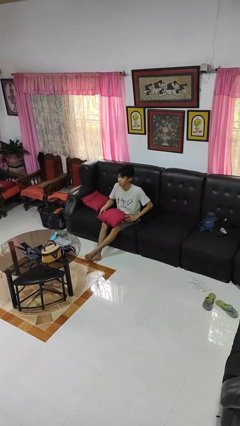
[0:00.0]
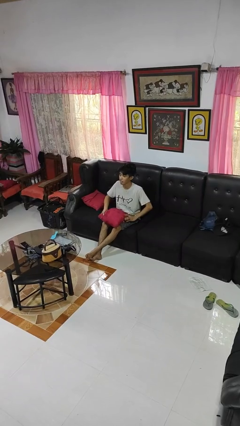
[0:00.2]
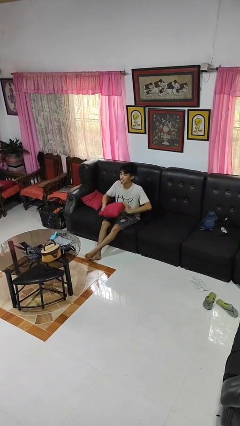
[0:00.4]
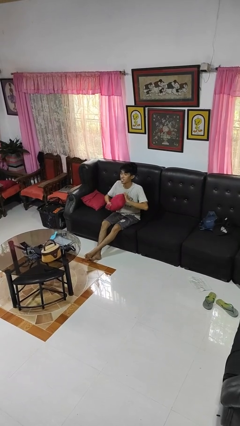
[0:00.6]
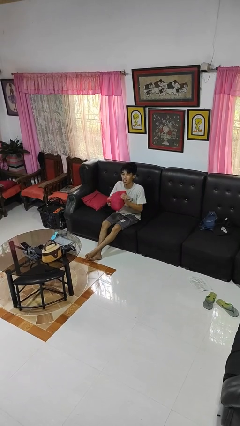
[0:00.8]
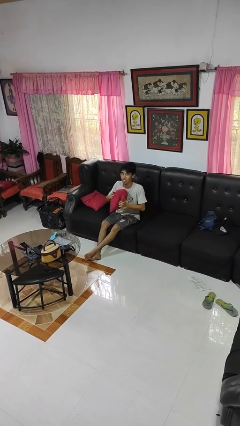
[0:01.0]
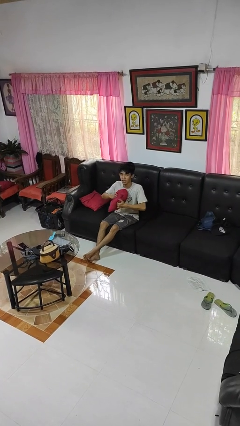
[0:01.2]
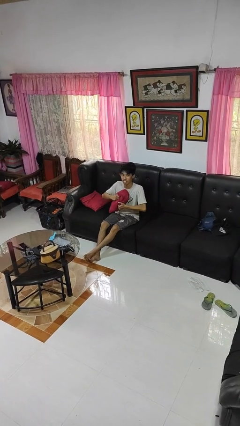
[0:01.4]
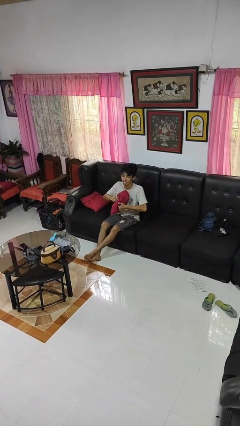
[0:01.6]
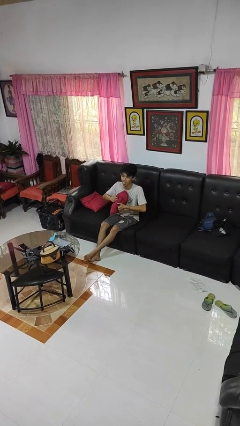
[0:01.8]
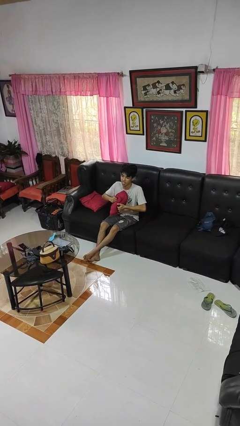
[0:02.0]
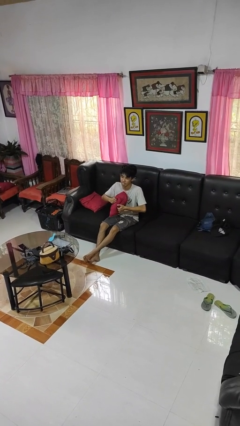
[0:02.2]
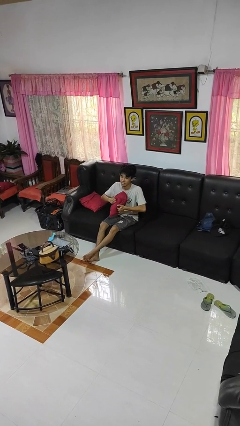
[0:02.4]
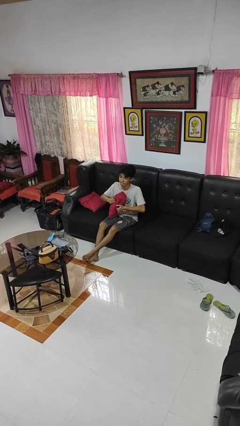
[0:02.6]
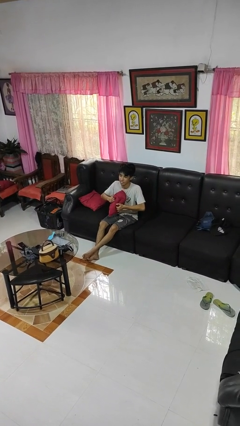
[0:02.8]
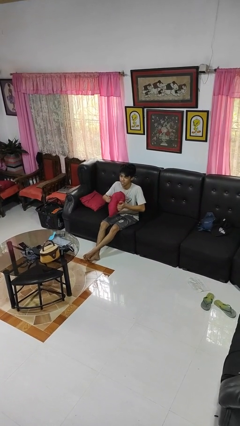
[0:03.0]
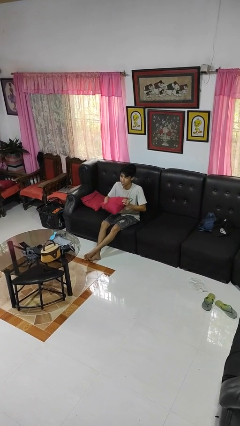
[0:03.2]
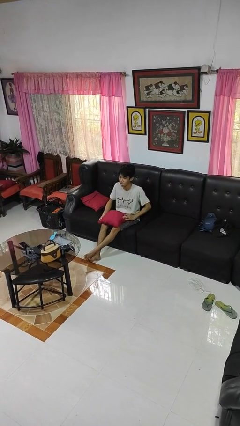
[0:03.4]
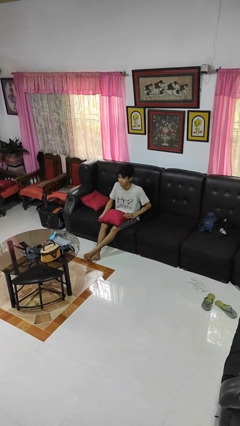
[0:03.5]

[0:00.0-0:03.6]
person squeezes object

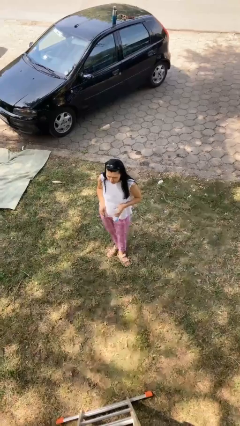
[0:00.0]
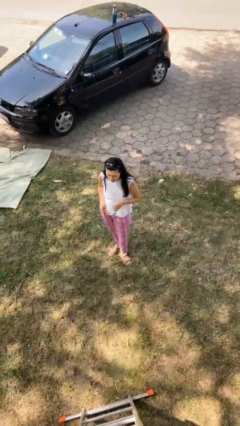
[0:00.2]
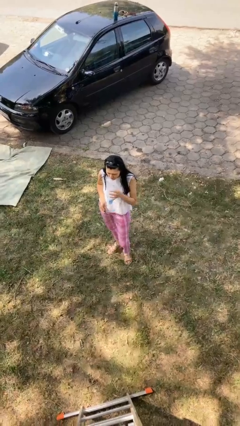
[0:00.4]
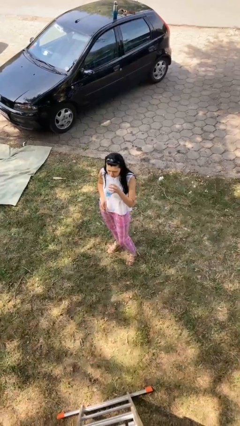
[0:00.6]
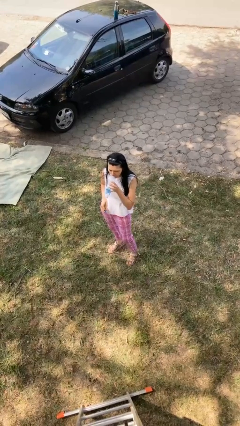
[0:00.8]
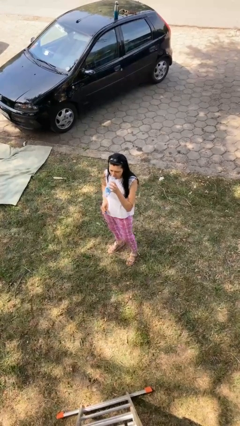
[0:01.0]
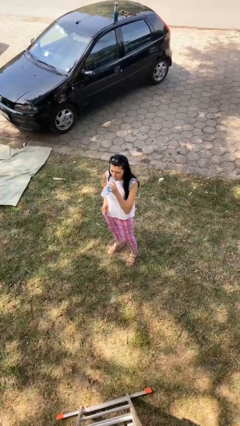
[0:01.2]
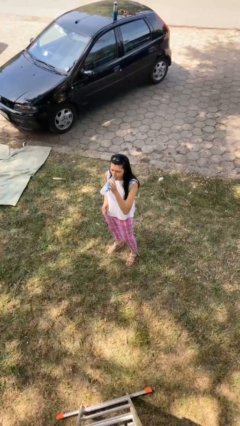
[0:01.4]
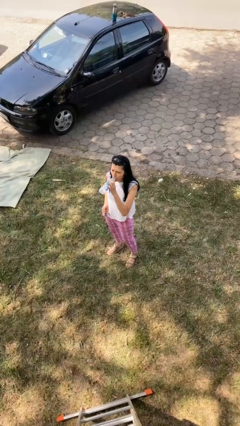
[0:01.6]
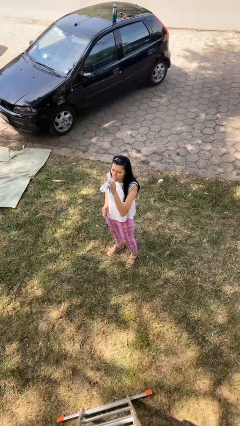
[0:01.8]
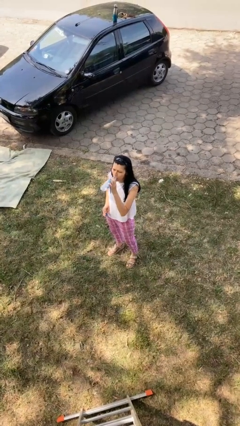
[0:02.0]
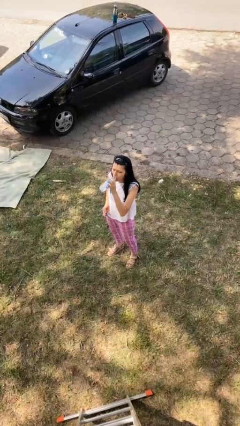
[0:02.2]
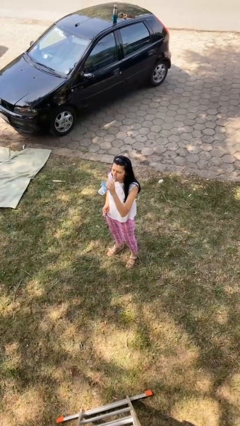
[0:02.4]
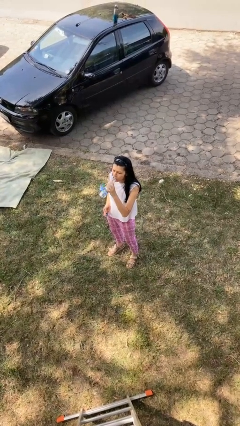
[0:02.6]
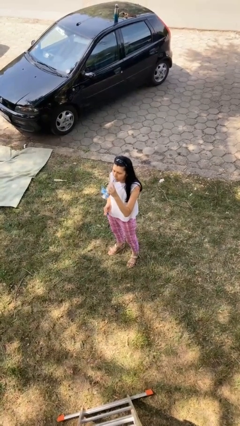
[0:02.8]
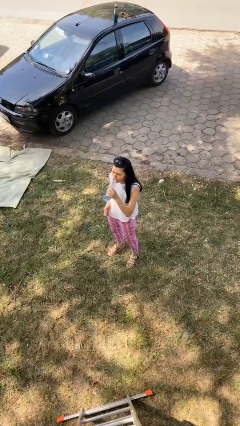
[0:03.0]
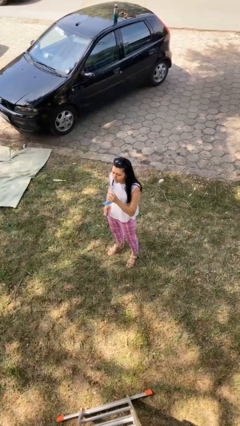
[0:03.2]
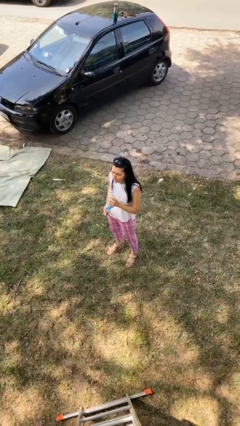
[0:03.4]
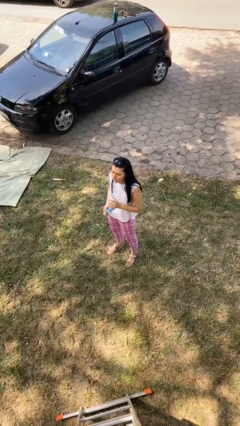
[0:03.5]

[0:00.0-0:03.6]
person drinks from bottle

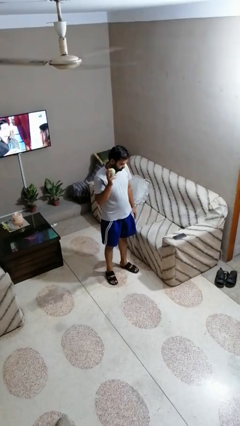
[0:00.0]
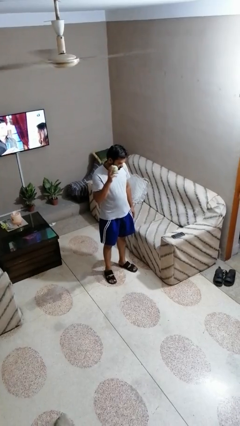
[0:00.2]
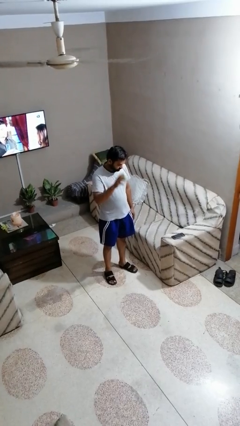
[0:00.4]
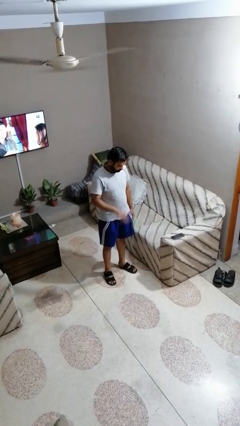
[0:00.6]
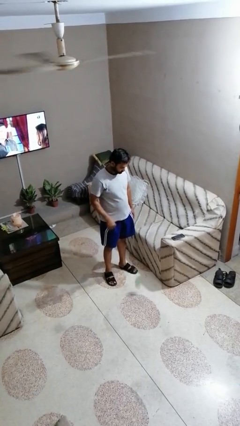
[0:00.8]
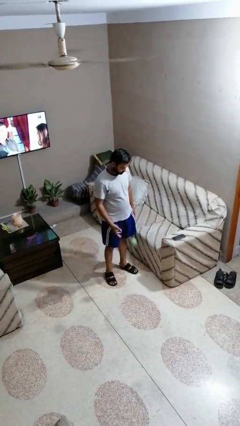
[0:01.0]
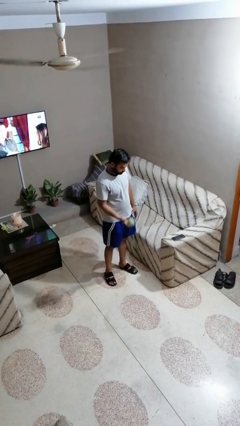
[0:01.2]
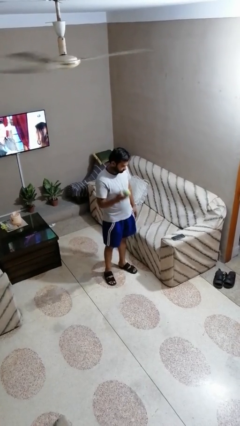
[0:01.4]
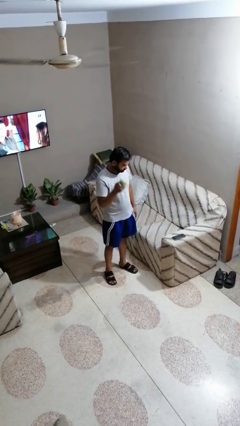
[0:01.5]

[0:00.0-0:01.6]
person bounces ball on floor

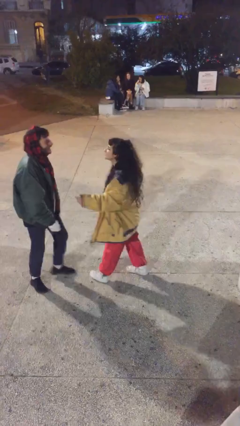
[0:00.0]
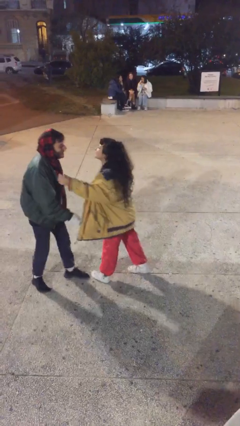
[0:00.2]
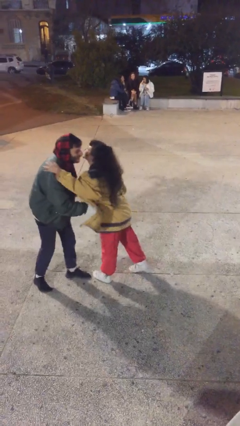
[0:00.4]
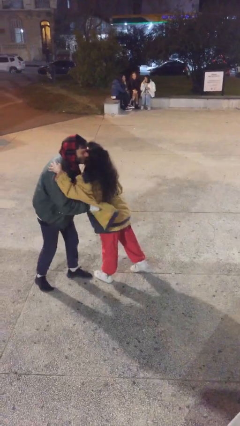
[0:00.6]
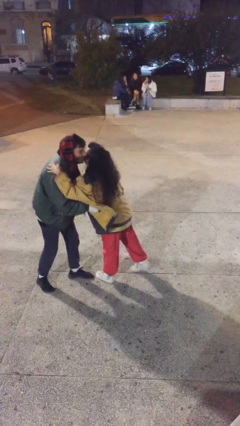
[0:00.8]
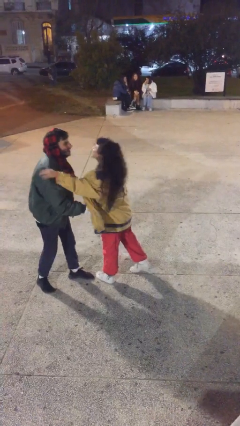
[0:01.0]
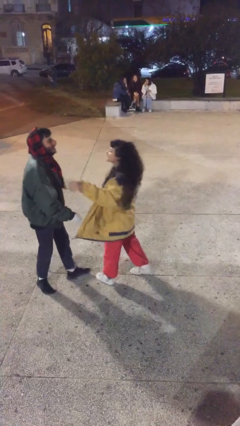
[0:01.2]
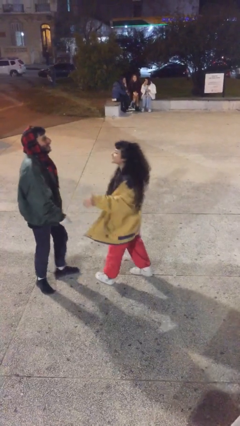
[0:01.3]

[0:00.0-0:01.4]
person kisses cheek of person

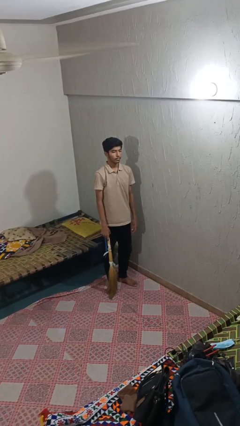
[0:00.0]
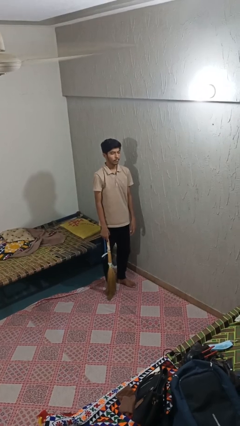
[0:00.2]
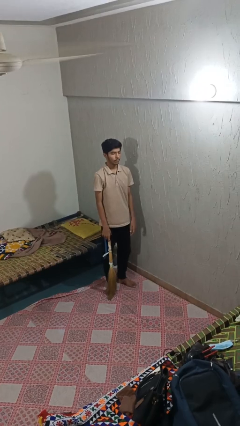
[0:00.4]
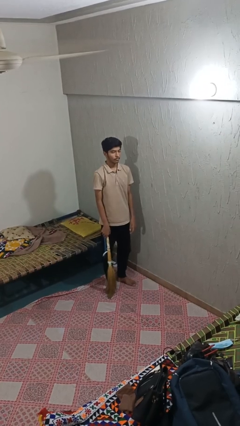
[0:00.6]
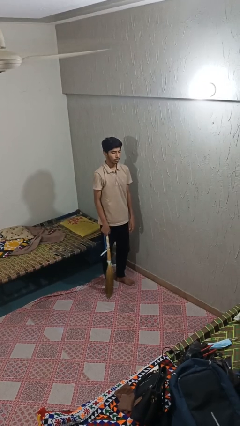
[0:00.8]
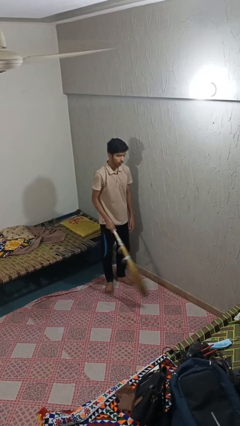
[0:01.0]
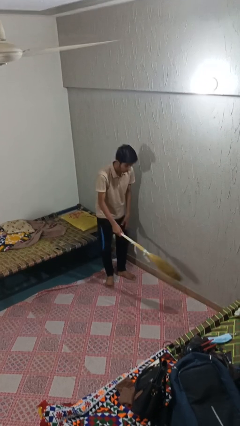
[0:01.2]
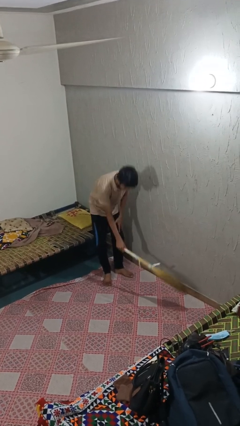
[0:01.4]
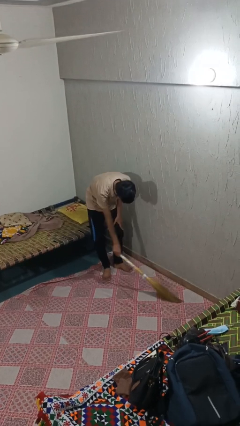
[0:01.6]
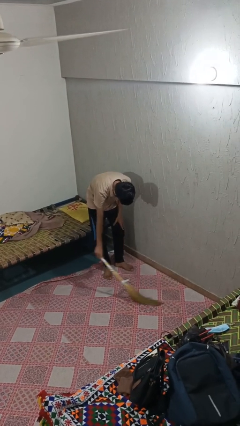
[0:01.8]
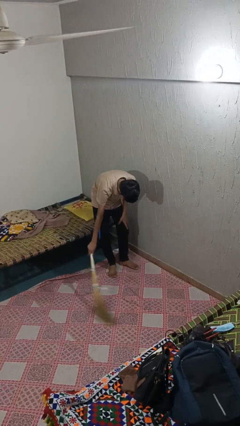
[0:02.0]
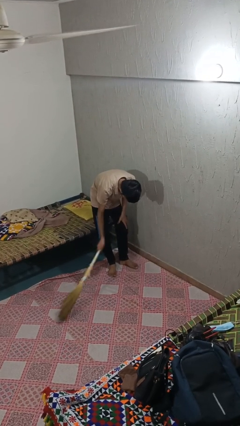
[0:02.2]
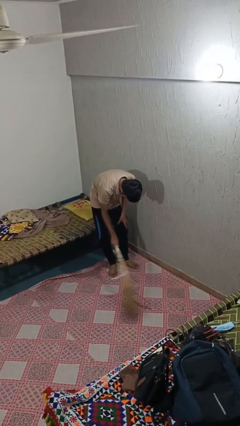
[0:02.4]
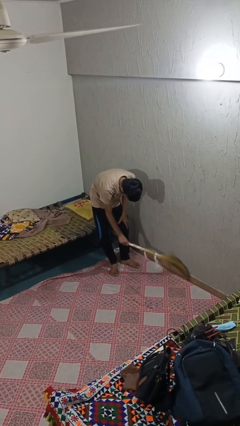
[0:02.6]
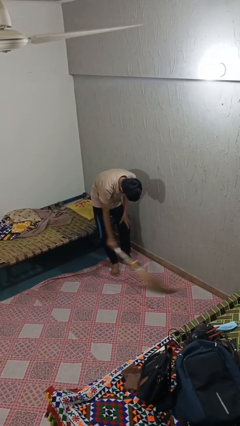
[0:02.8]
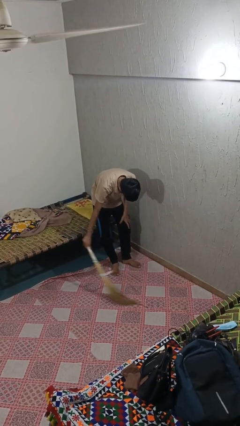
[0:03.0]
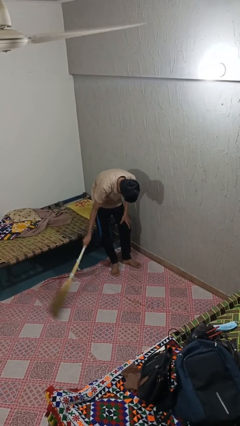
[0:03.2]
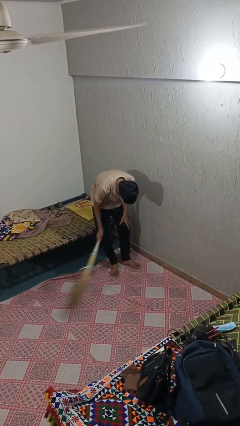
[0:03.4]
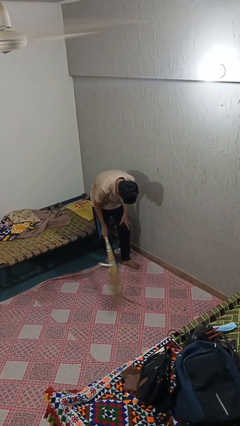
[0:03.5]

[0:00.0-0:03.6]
person sweeps floor

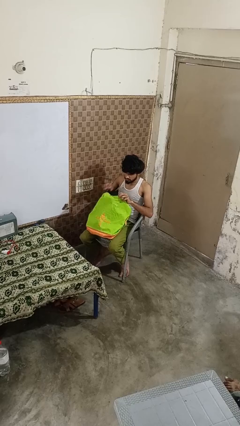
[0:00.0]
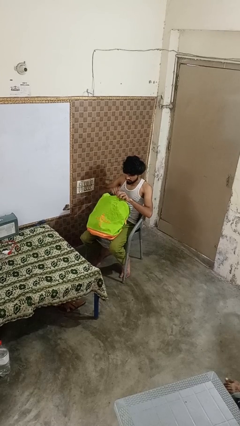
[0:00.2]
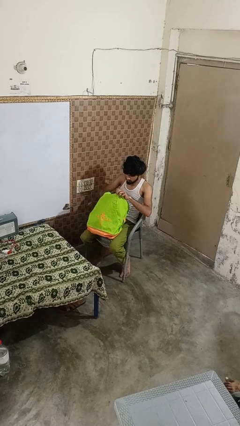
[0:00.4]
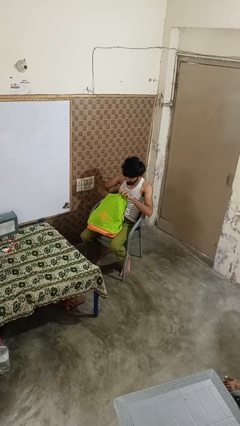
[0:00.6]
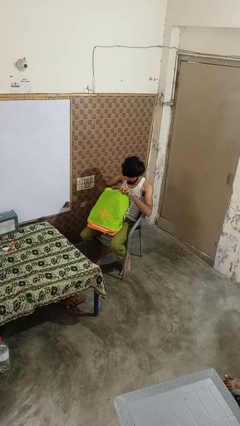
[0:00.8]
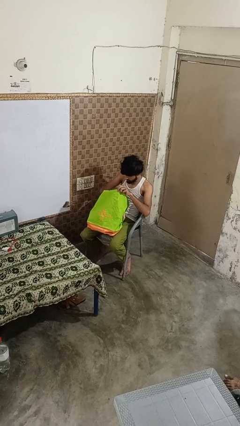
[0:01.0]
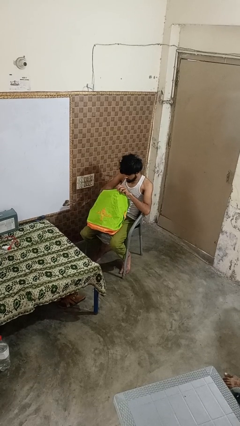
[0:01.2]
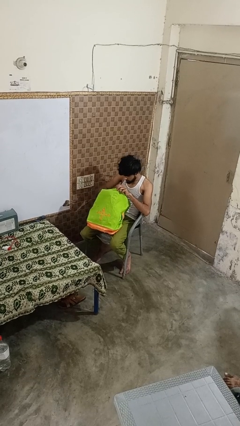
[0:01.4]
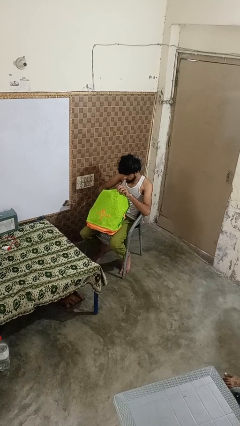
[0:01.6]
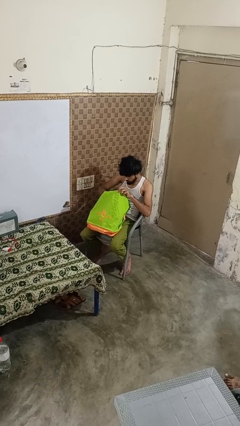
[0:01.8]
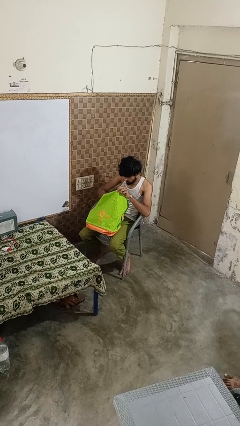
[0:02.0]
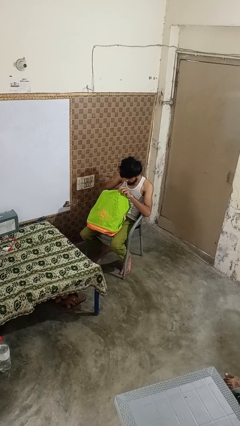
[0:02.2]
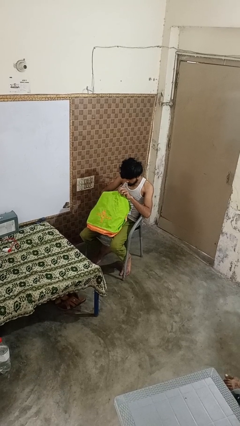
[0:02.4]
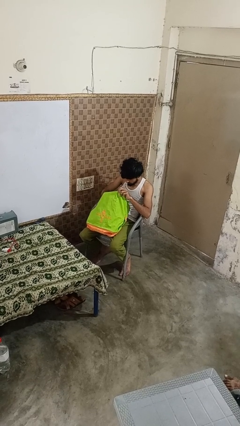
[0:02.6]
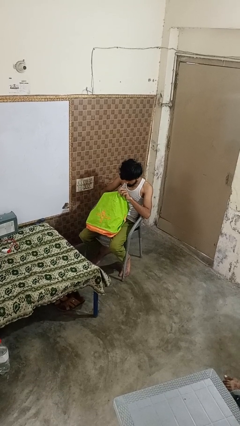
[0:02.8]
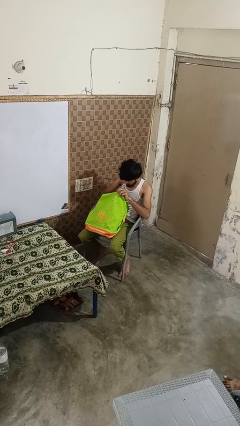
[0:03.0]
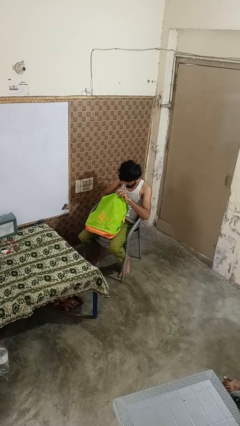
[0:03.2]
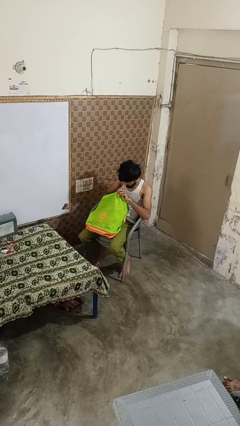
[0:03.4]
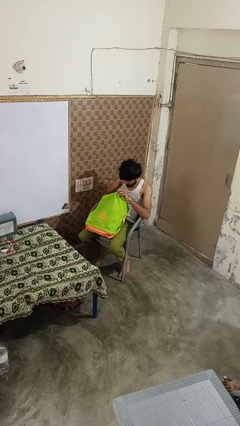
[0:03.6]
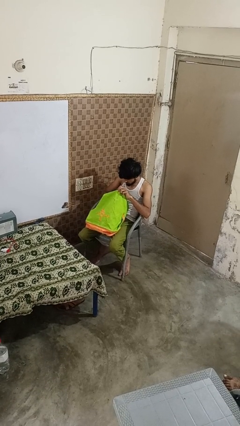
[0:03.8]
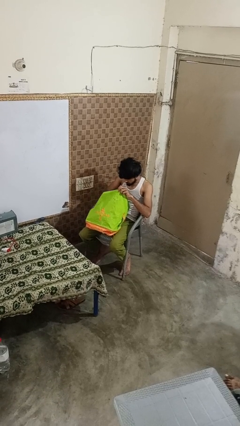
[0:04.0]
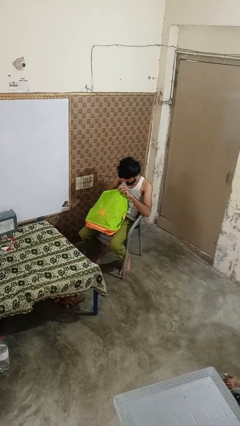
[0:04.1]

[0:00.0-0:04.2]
person searches in bag

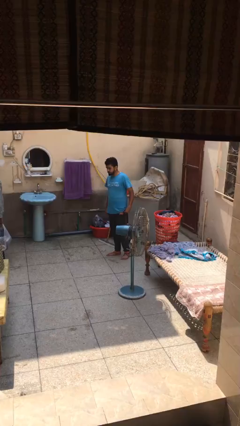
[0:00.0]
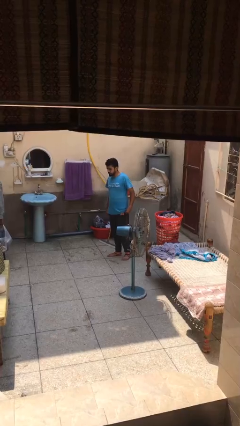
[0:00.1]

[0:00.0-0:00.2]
person steals object from person
